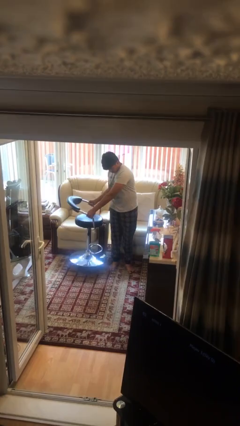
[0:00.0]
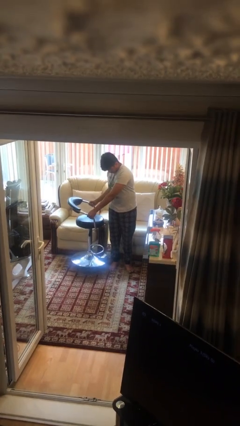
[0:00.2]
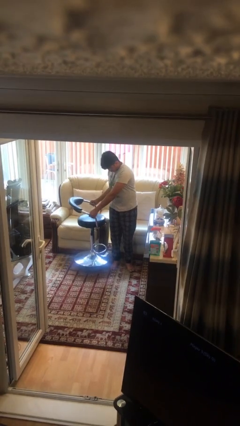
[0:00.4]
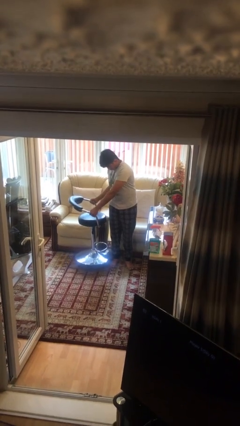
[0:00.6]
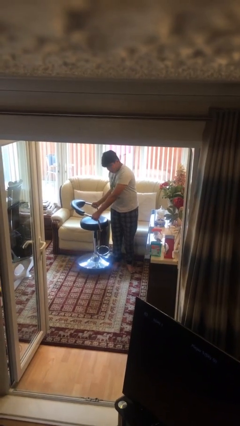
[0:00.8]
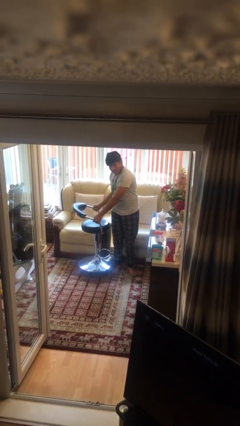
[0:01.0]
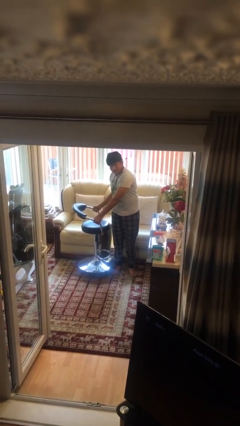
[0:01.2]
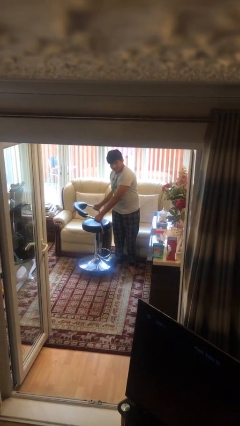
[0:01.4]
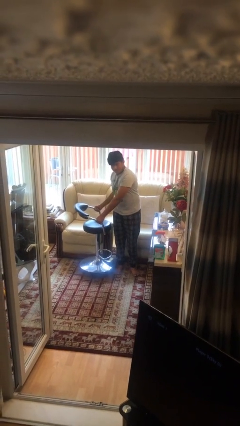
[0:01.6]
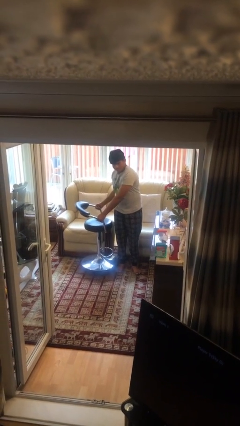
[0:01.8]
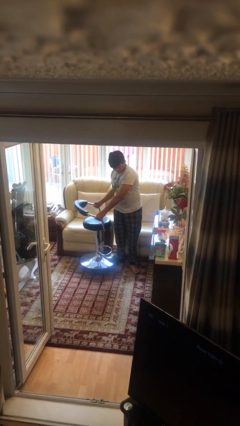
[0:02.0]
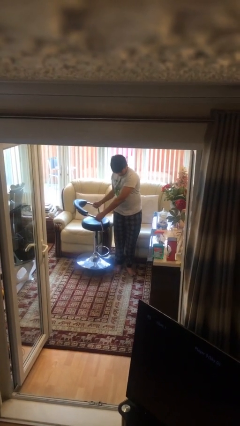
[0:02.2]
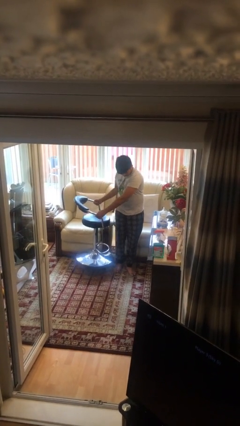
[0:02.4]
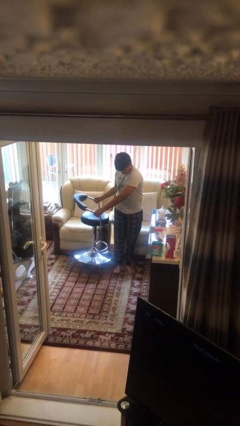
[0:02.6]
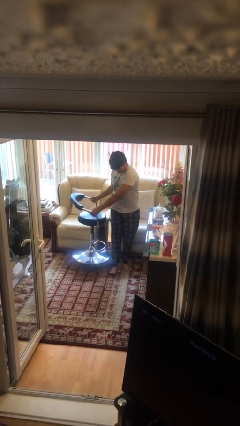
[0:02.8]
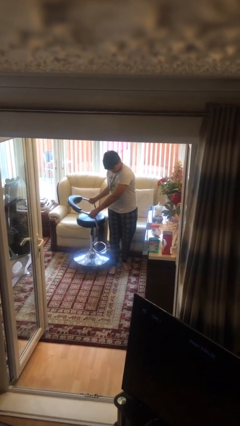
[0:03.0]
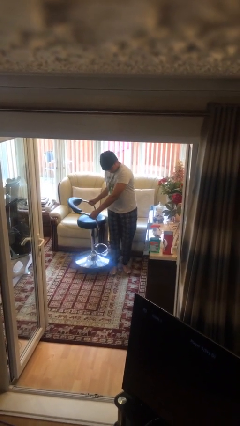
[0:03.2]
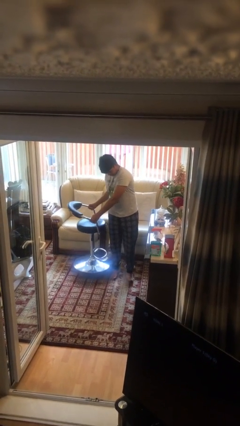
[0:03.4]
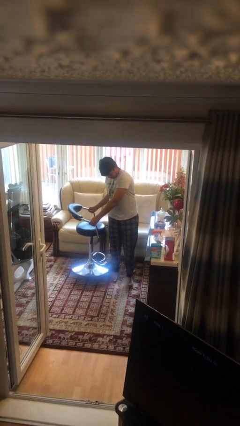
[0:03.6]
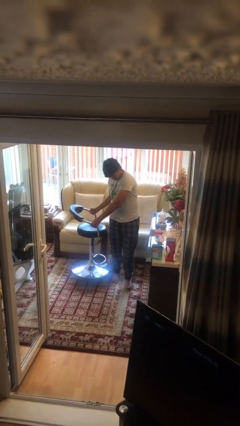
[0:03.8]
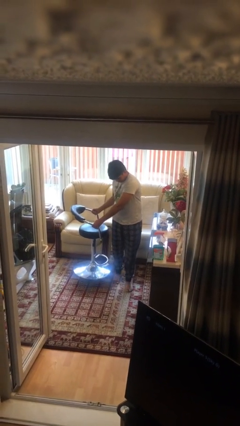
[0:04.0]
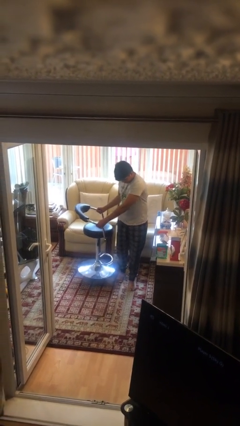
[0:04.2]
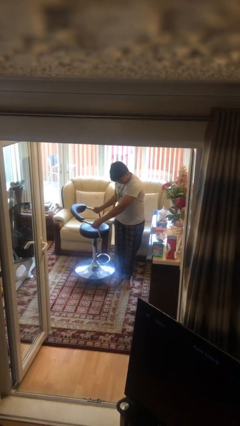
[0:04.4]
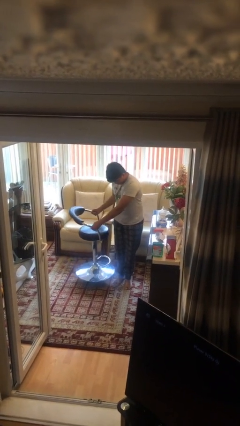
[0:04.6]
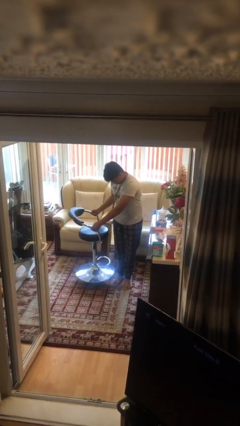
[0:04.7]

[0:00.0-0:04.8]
person carries heavy object

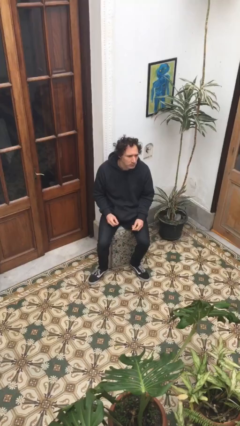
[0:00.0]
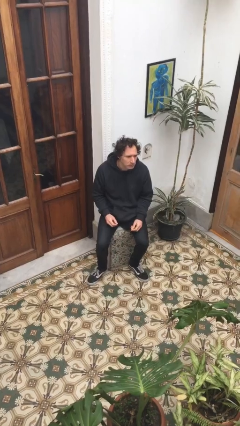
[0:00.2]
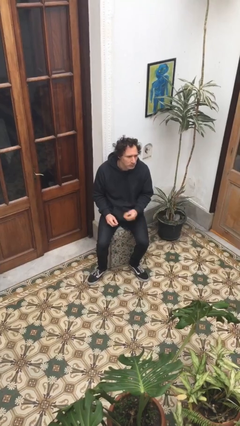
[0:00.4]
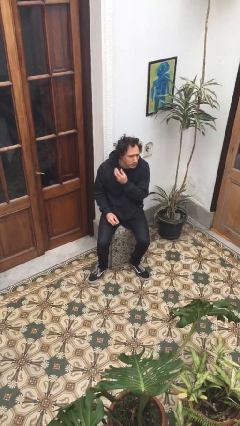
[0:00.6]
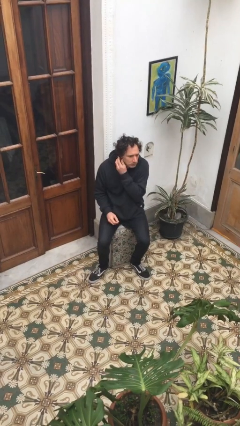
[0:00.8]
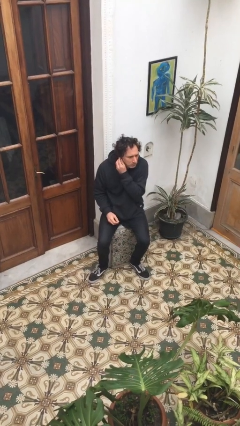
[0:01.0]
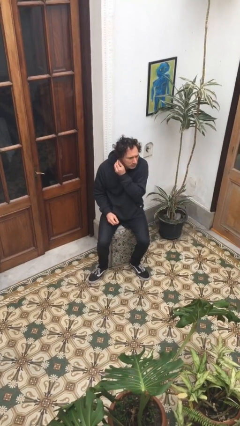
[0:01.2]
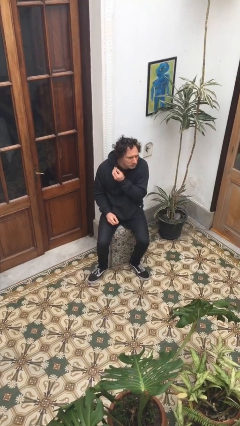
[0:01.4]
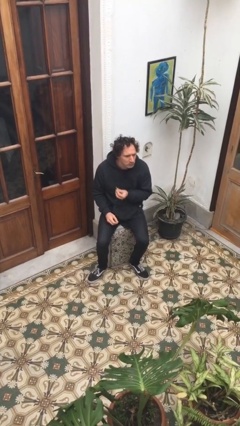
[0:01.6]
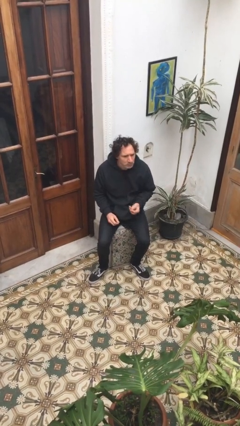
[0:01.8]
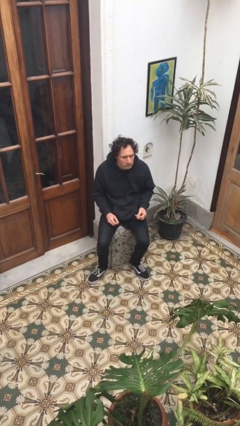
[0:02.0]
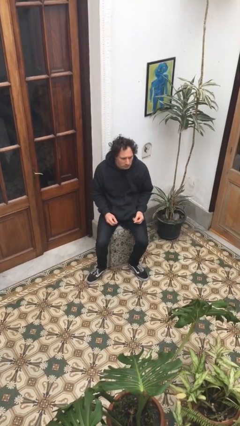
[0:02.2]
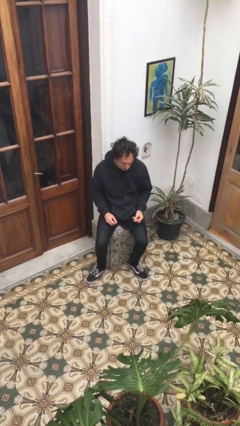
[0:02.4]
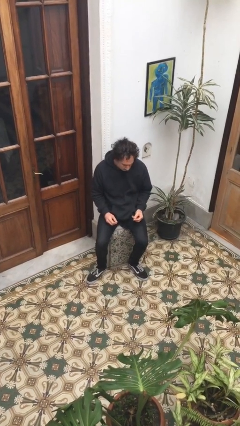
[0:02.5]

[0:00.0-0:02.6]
person takes off earrings

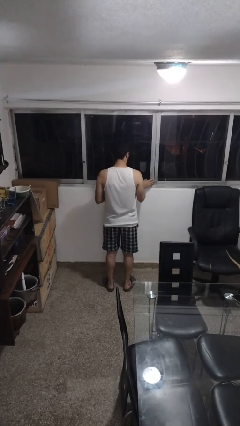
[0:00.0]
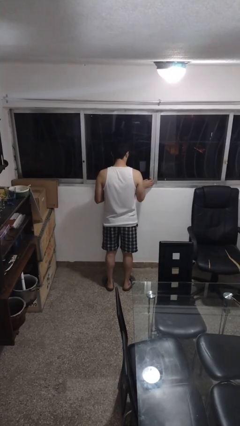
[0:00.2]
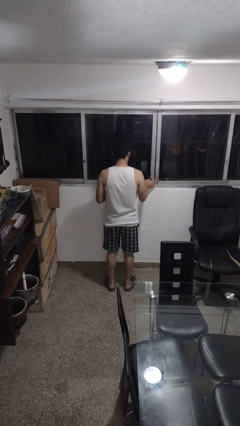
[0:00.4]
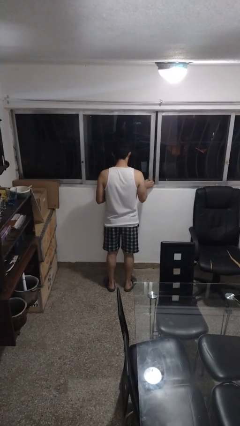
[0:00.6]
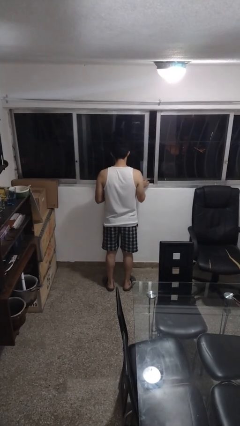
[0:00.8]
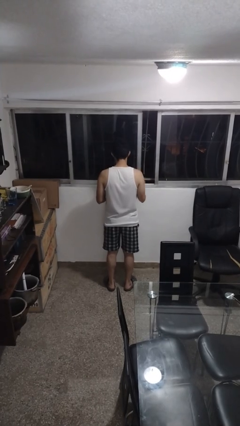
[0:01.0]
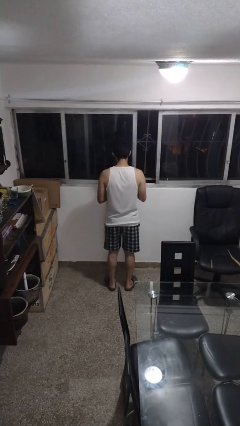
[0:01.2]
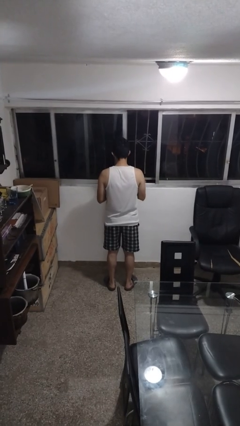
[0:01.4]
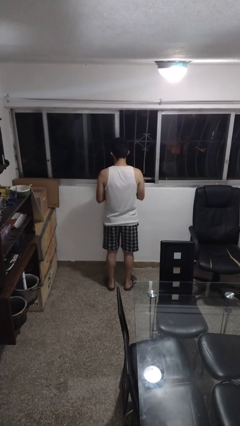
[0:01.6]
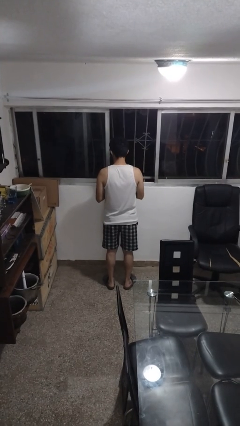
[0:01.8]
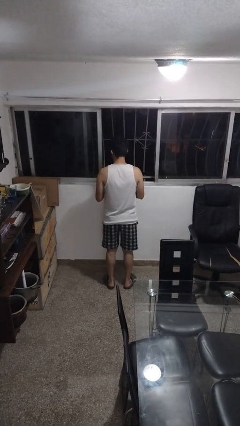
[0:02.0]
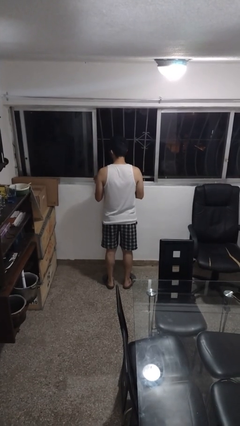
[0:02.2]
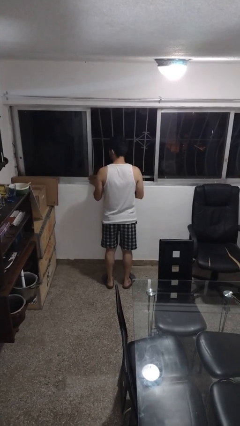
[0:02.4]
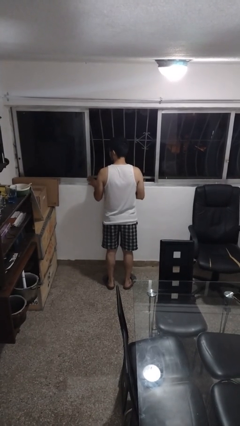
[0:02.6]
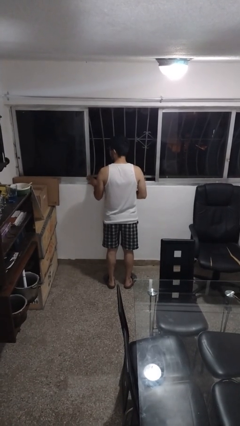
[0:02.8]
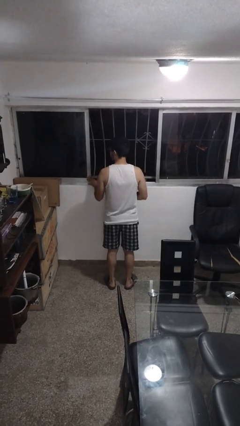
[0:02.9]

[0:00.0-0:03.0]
person opens home window

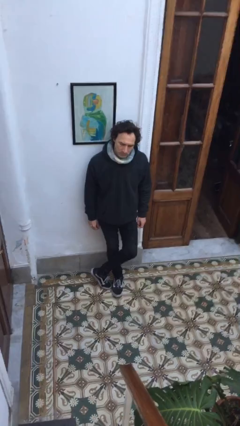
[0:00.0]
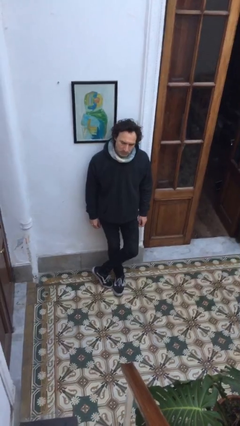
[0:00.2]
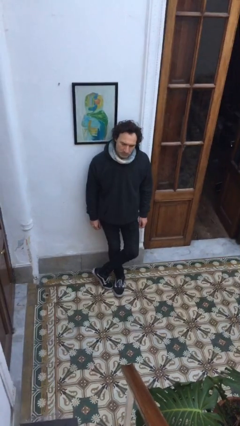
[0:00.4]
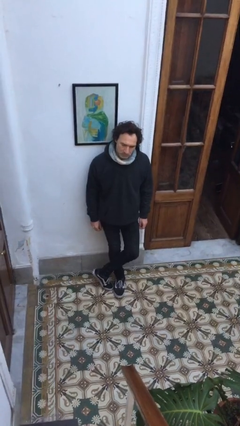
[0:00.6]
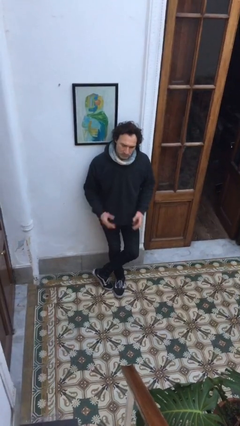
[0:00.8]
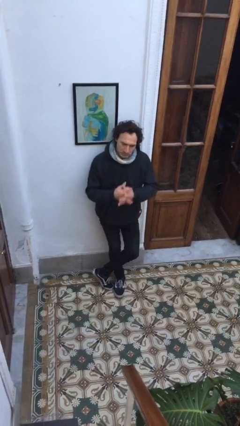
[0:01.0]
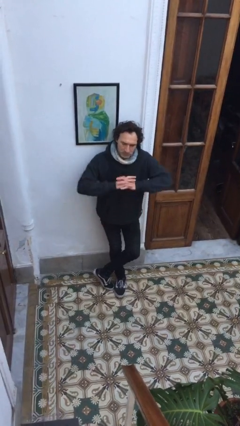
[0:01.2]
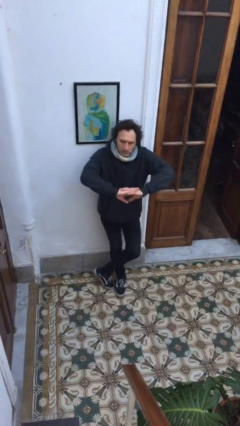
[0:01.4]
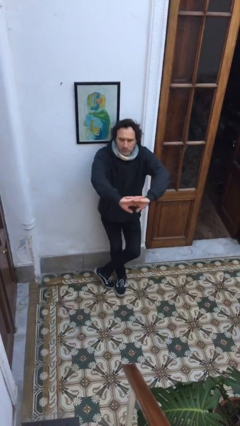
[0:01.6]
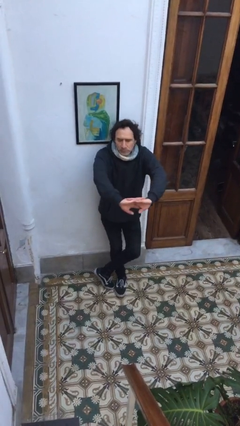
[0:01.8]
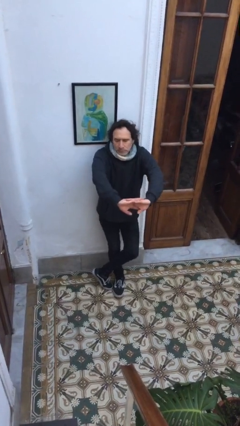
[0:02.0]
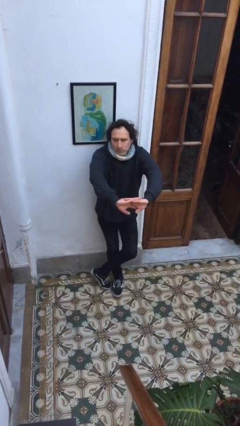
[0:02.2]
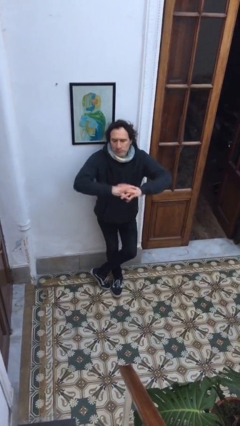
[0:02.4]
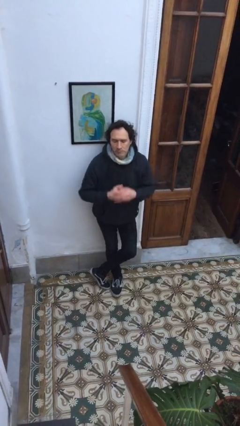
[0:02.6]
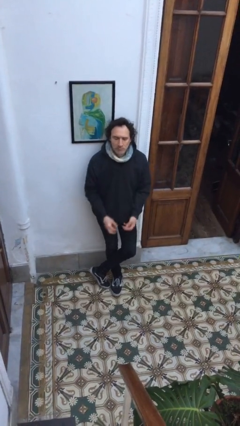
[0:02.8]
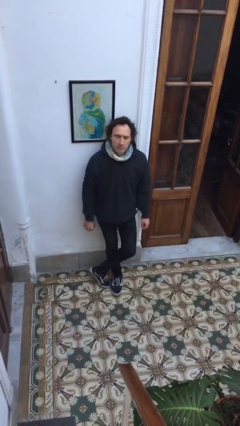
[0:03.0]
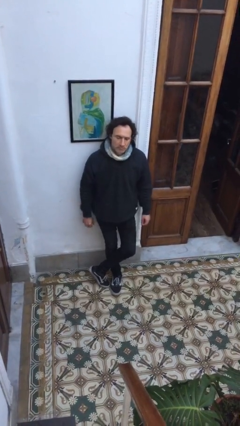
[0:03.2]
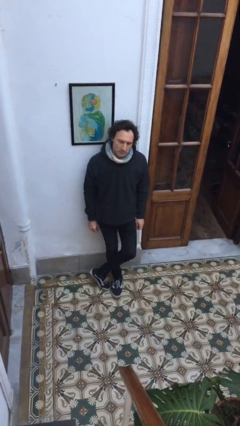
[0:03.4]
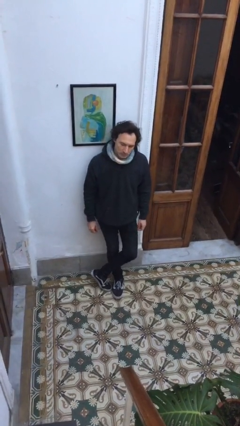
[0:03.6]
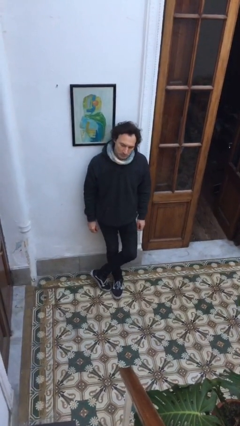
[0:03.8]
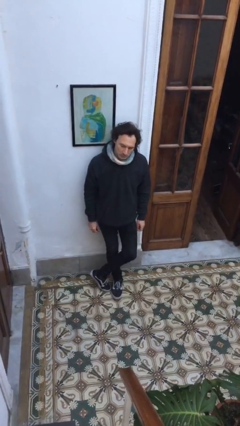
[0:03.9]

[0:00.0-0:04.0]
person cracks knuckles

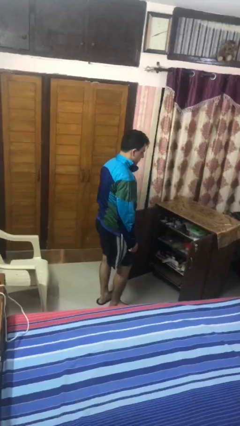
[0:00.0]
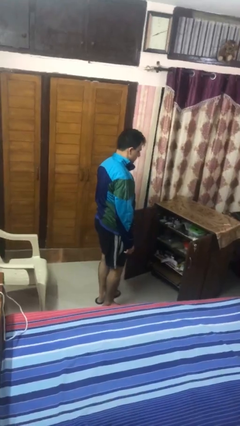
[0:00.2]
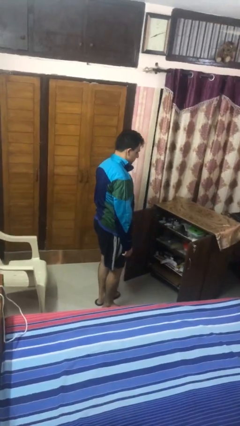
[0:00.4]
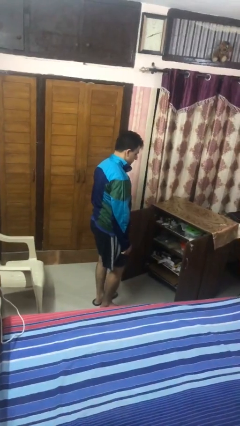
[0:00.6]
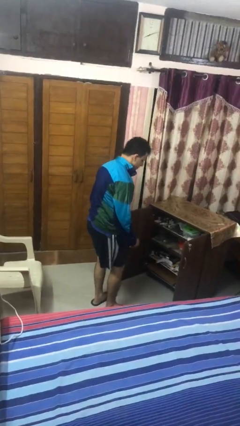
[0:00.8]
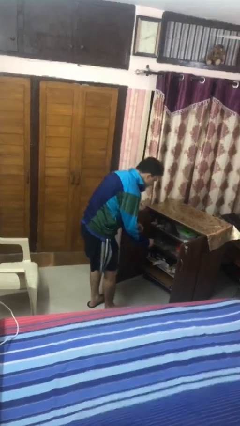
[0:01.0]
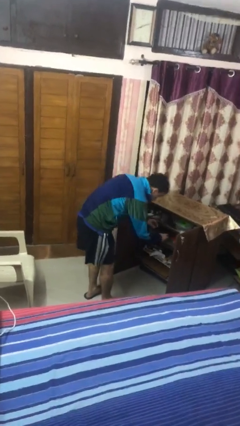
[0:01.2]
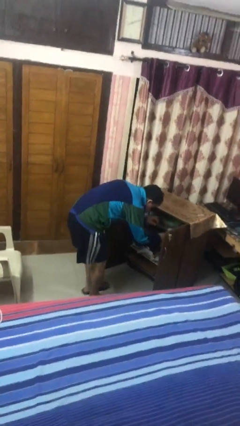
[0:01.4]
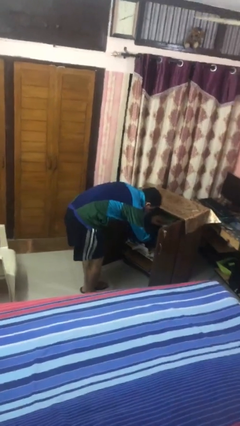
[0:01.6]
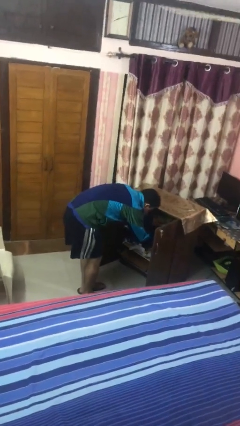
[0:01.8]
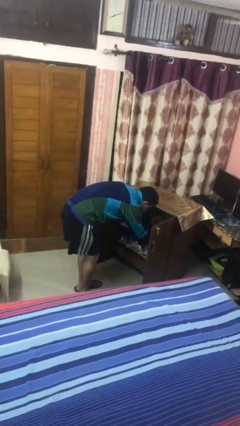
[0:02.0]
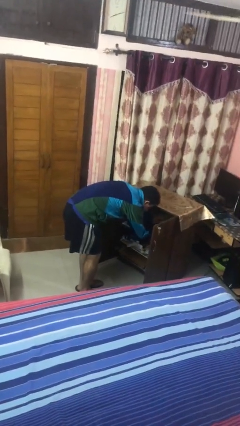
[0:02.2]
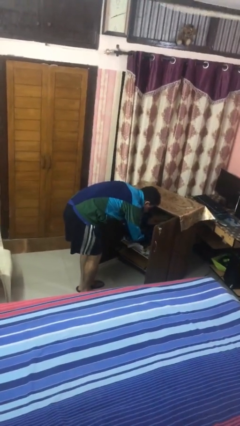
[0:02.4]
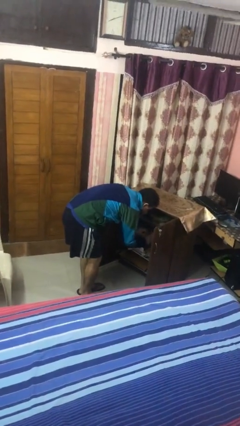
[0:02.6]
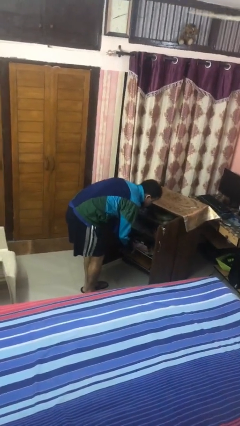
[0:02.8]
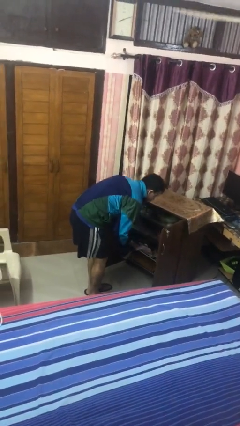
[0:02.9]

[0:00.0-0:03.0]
person searches in cabinet

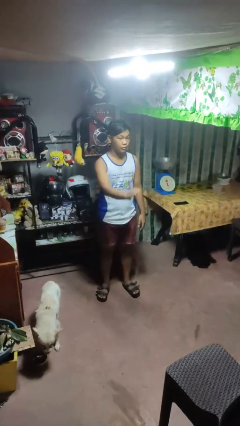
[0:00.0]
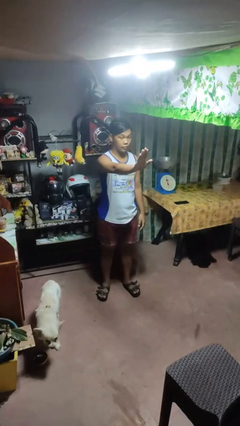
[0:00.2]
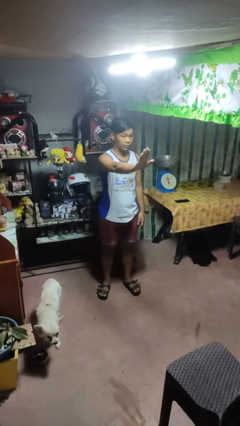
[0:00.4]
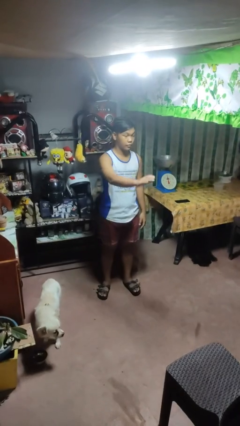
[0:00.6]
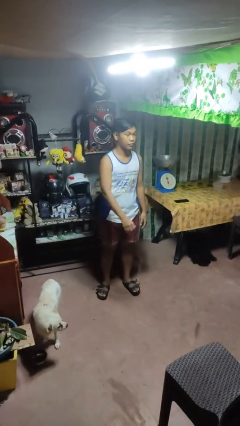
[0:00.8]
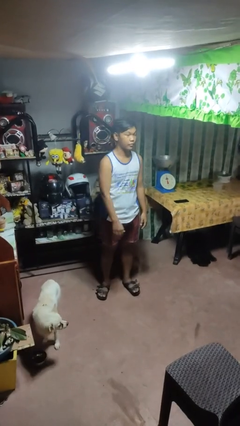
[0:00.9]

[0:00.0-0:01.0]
person gestures stop
